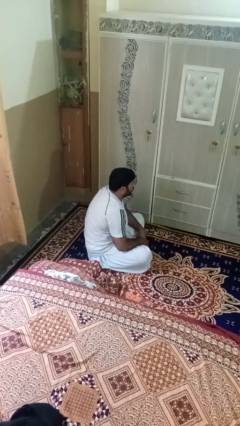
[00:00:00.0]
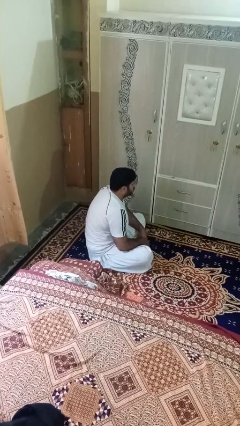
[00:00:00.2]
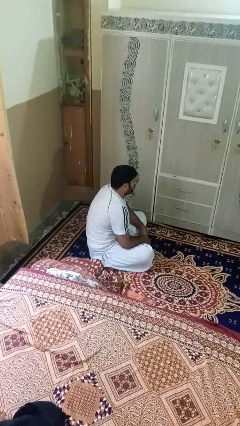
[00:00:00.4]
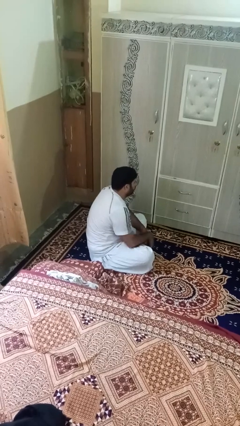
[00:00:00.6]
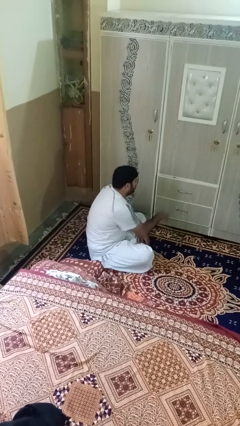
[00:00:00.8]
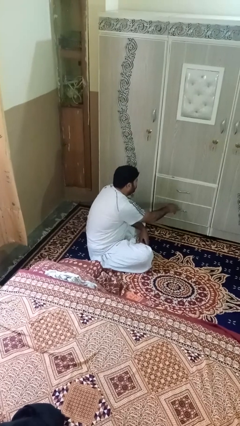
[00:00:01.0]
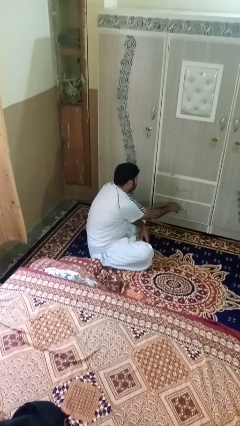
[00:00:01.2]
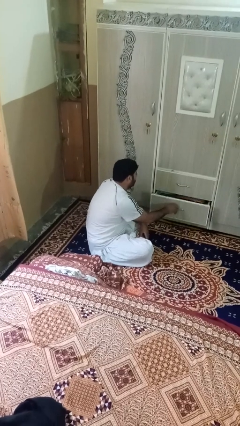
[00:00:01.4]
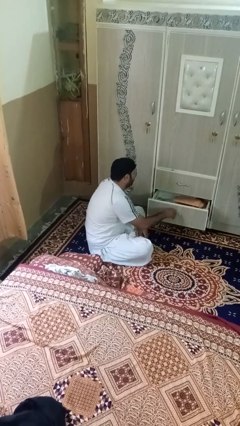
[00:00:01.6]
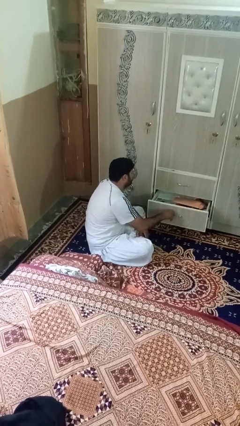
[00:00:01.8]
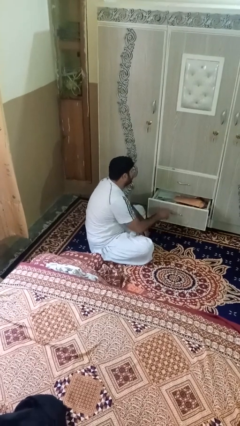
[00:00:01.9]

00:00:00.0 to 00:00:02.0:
person opens dresser drawer

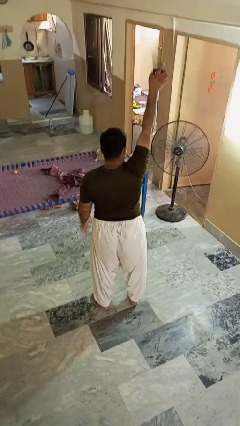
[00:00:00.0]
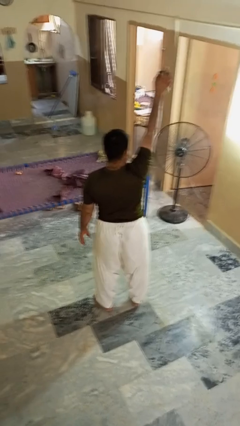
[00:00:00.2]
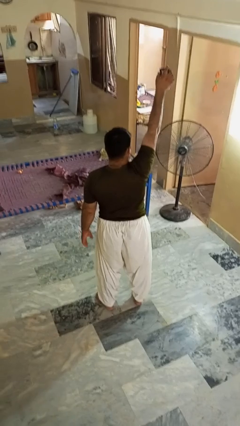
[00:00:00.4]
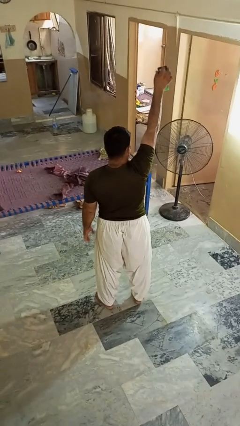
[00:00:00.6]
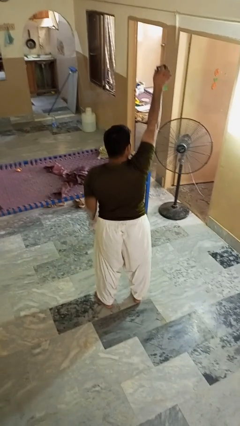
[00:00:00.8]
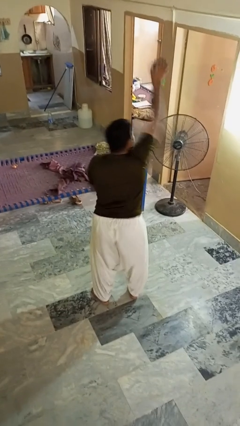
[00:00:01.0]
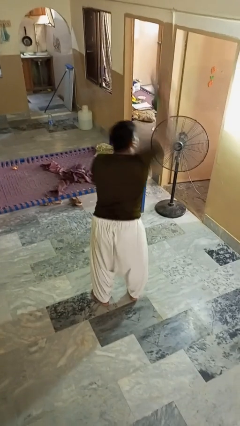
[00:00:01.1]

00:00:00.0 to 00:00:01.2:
person drops object

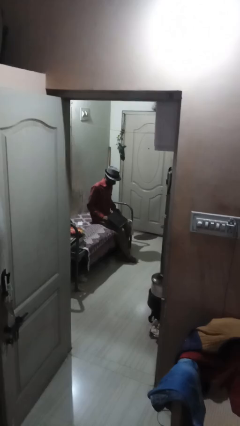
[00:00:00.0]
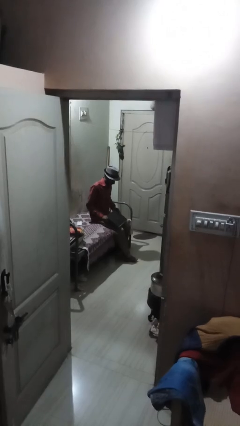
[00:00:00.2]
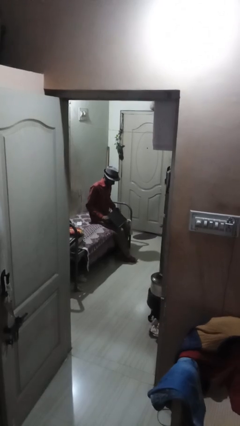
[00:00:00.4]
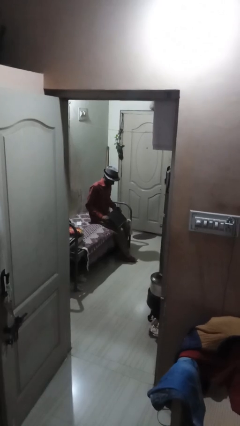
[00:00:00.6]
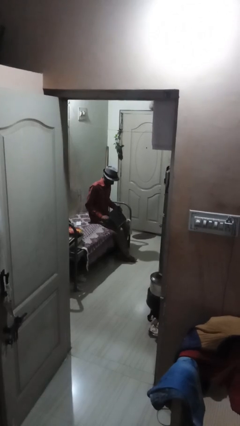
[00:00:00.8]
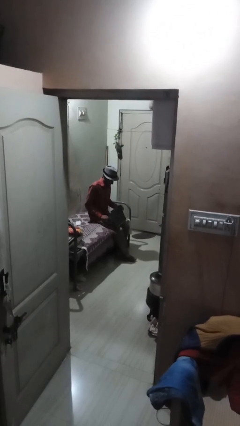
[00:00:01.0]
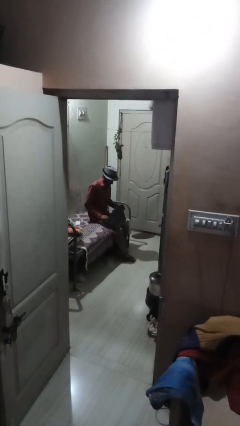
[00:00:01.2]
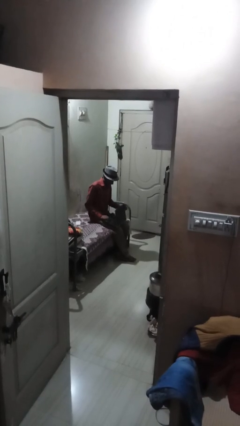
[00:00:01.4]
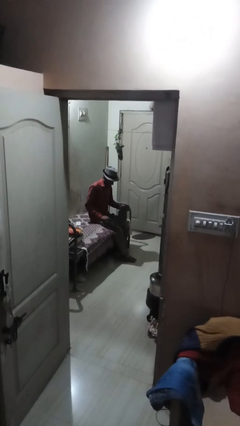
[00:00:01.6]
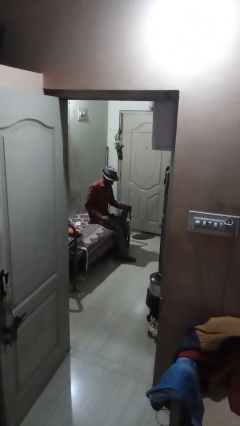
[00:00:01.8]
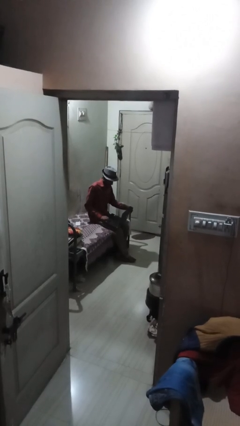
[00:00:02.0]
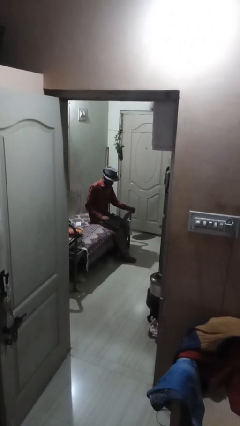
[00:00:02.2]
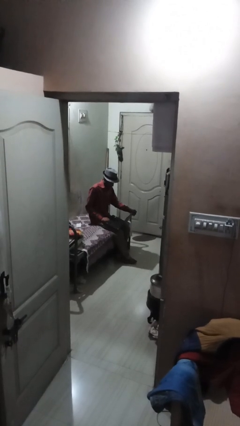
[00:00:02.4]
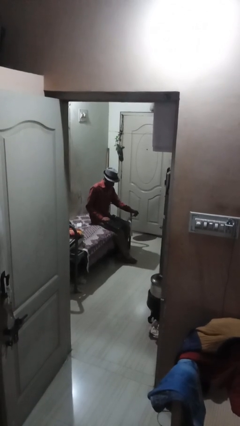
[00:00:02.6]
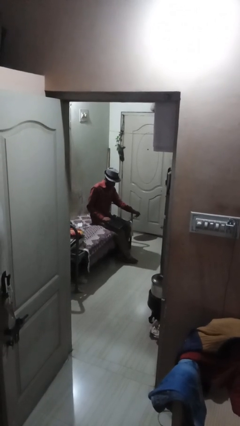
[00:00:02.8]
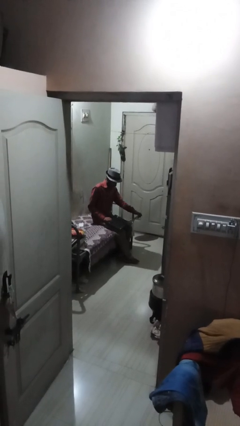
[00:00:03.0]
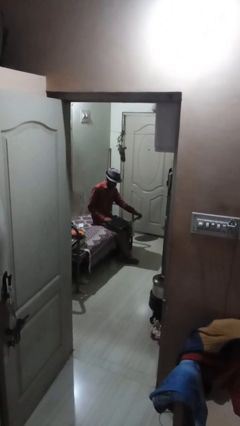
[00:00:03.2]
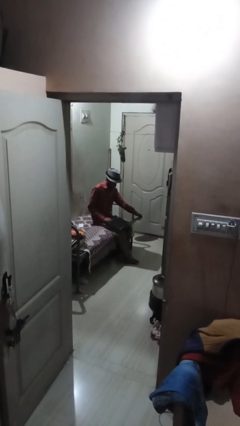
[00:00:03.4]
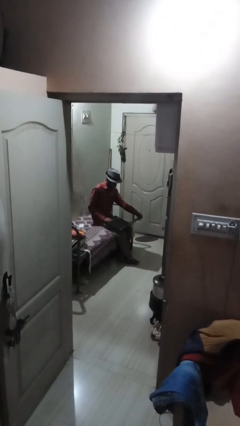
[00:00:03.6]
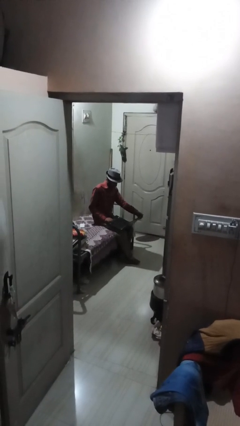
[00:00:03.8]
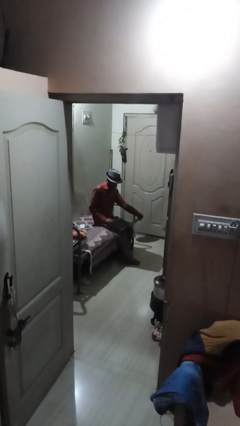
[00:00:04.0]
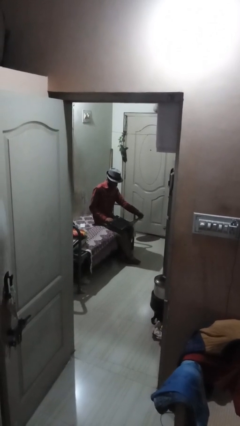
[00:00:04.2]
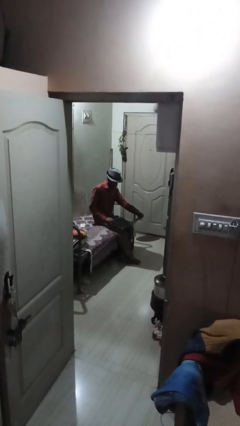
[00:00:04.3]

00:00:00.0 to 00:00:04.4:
person opens laptop

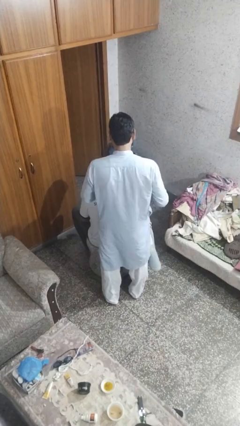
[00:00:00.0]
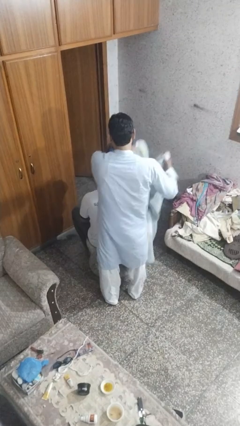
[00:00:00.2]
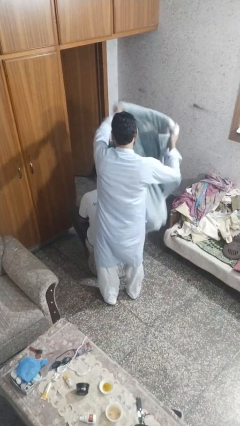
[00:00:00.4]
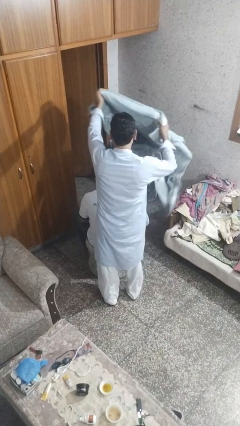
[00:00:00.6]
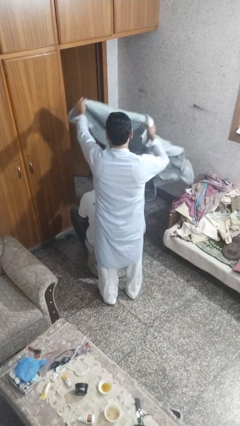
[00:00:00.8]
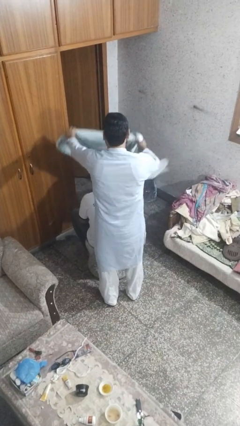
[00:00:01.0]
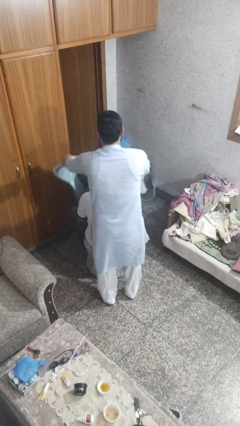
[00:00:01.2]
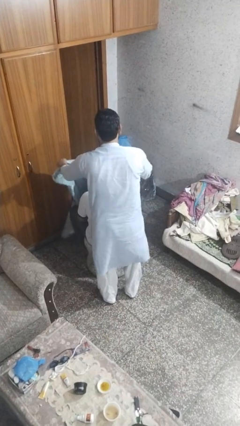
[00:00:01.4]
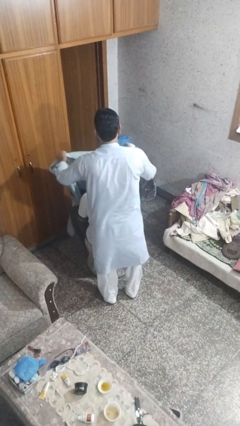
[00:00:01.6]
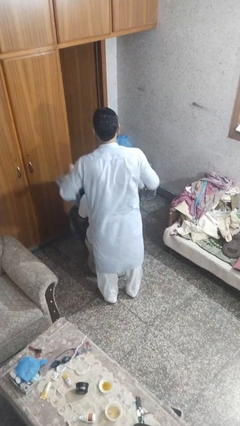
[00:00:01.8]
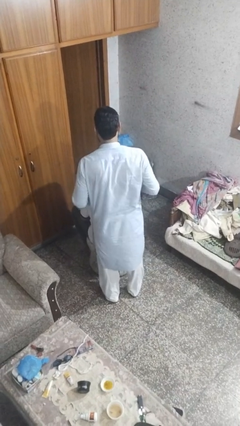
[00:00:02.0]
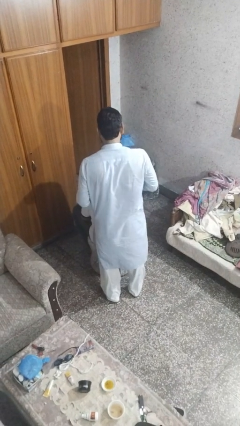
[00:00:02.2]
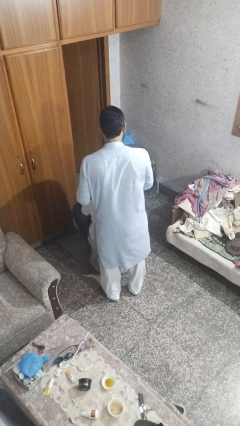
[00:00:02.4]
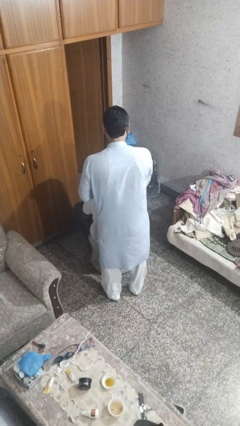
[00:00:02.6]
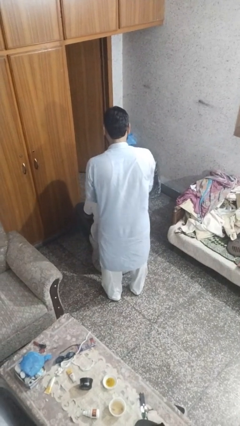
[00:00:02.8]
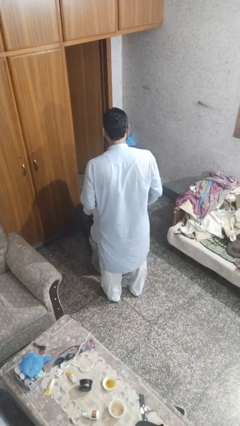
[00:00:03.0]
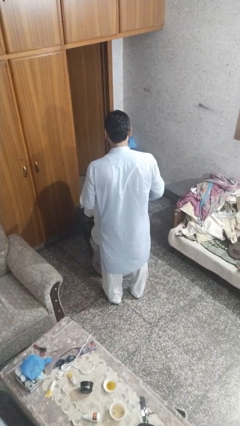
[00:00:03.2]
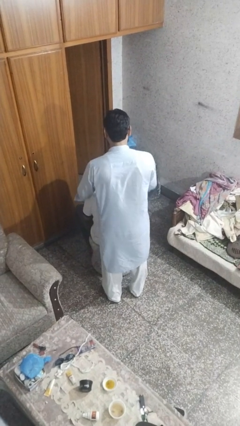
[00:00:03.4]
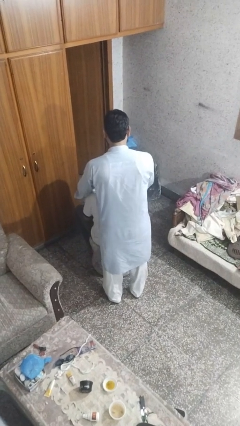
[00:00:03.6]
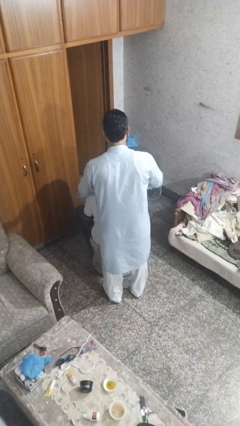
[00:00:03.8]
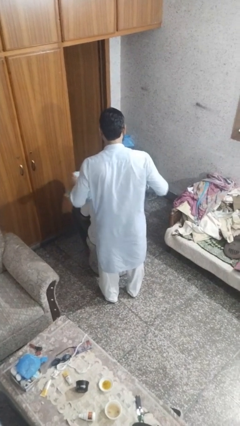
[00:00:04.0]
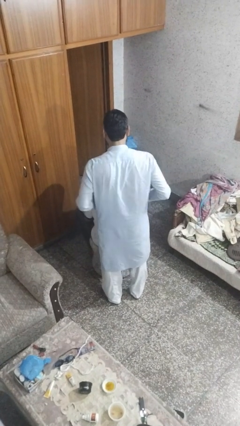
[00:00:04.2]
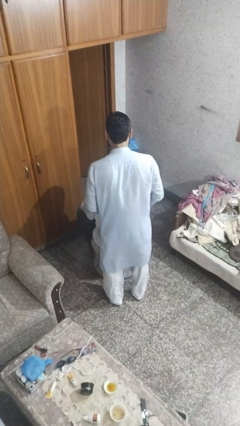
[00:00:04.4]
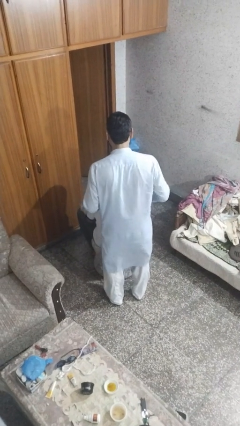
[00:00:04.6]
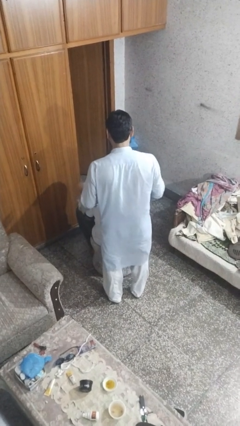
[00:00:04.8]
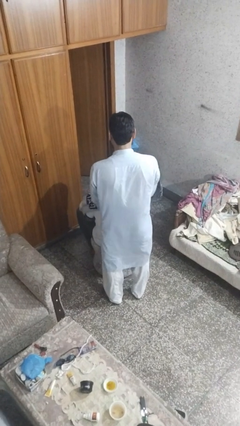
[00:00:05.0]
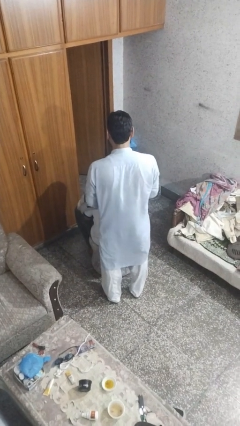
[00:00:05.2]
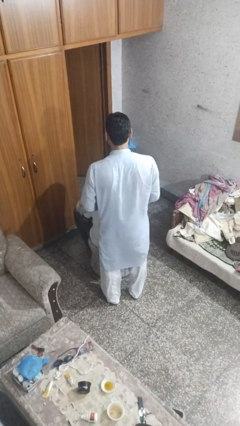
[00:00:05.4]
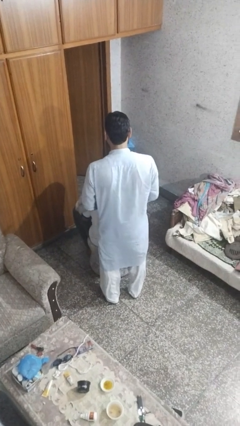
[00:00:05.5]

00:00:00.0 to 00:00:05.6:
person covers friend with blanket

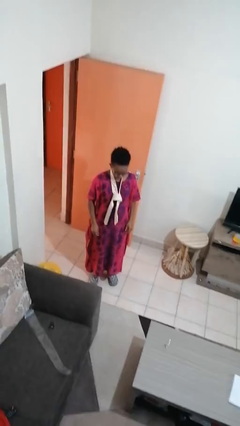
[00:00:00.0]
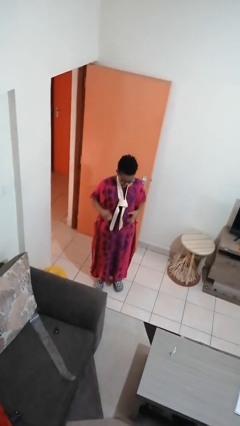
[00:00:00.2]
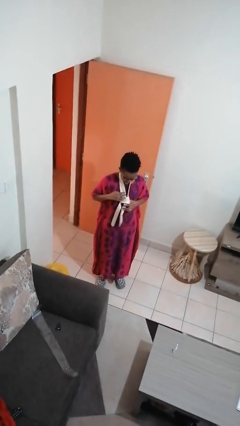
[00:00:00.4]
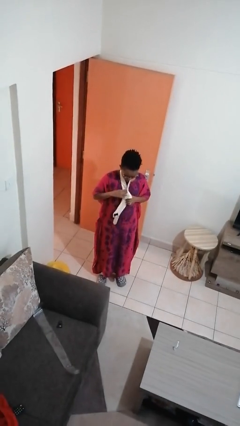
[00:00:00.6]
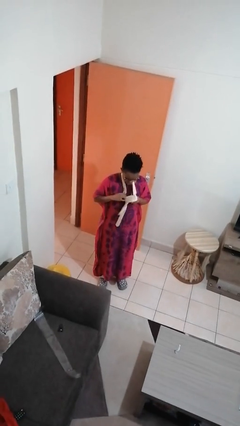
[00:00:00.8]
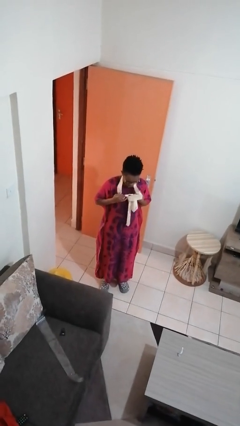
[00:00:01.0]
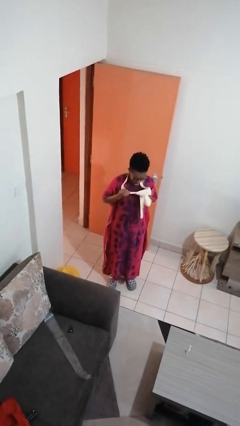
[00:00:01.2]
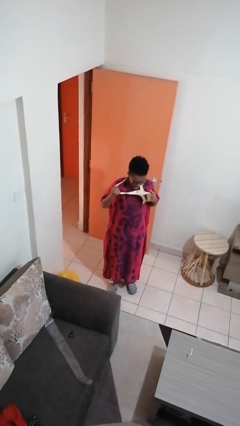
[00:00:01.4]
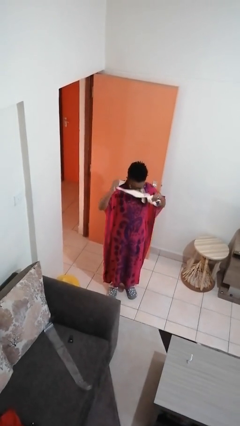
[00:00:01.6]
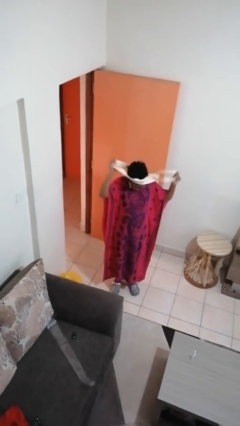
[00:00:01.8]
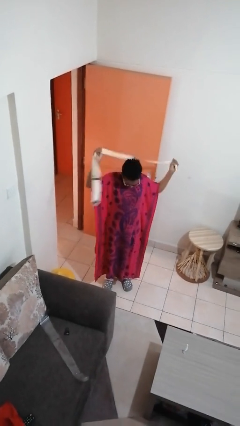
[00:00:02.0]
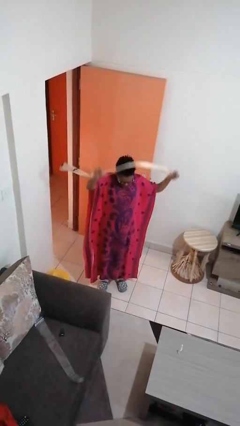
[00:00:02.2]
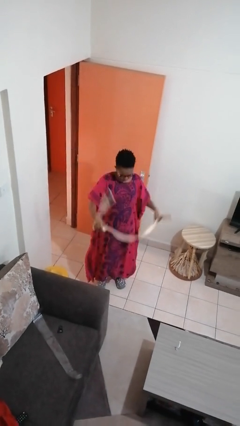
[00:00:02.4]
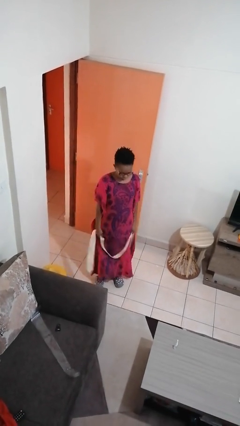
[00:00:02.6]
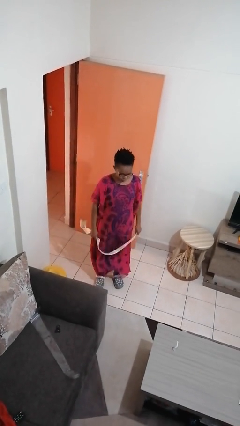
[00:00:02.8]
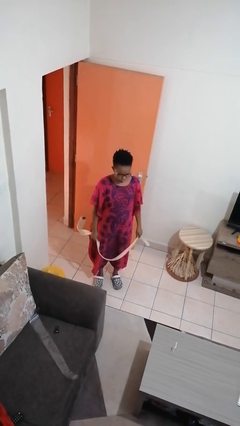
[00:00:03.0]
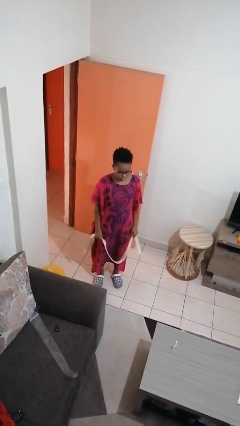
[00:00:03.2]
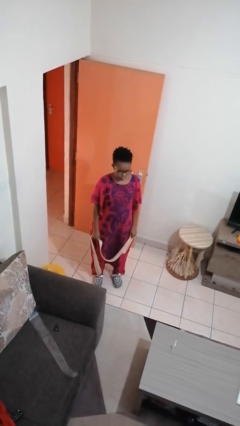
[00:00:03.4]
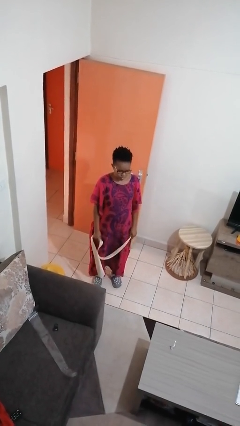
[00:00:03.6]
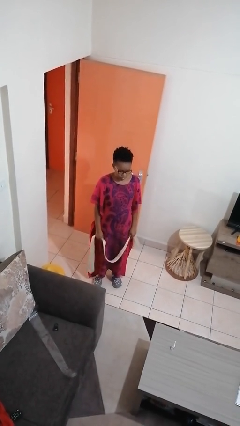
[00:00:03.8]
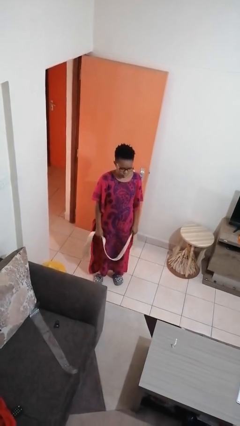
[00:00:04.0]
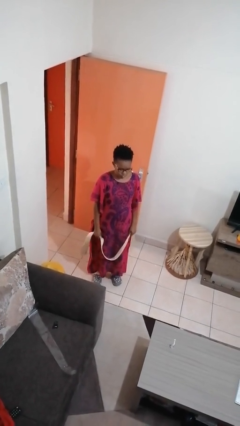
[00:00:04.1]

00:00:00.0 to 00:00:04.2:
person takes off necktie

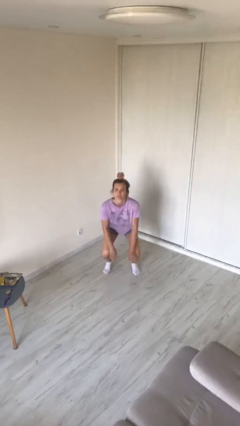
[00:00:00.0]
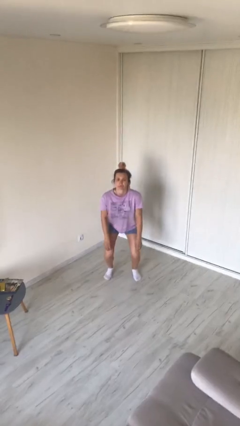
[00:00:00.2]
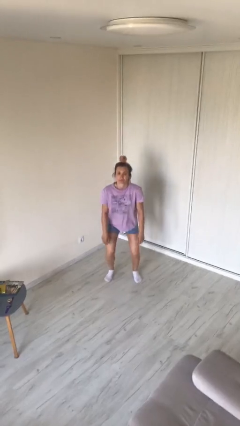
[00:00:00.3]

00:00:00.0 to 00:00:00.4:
person stands up
